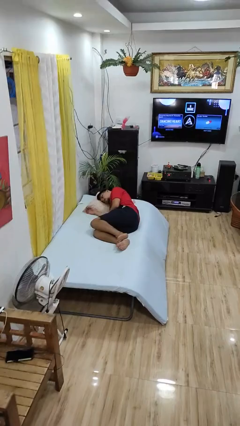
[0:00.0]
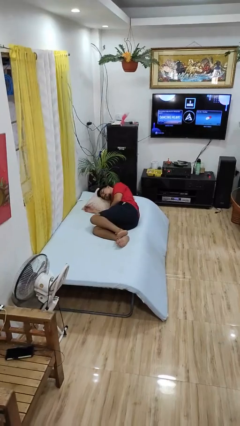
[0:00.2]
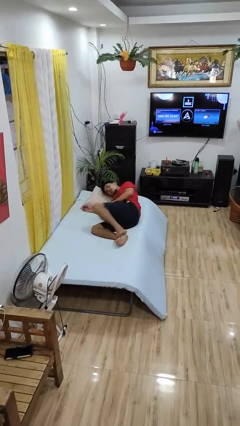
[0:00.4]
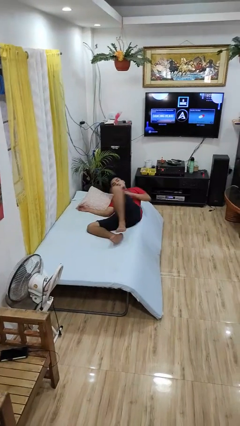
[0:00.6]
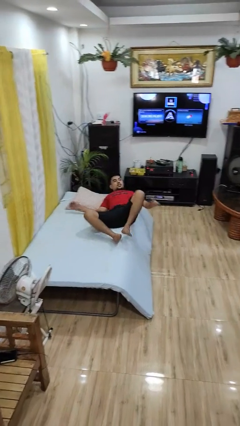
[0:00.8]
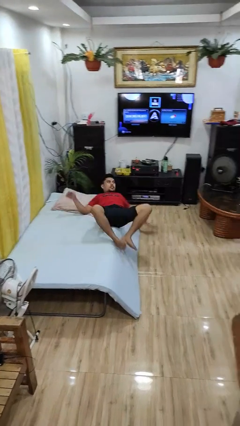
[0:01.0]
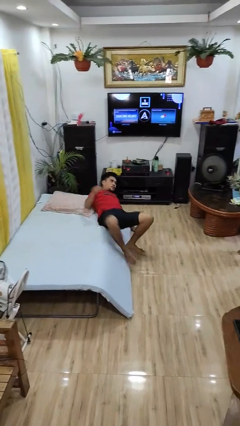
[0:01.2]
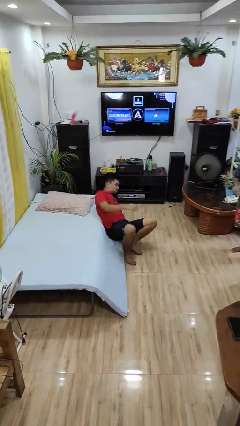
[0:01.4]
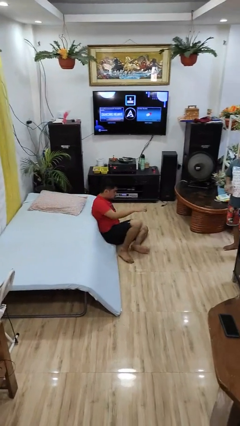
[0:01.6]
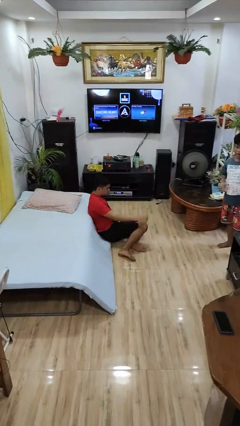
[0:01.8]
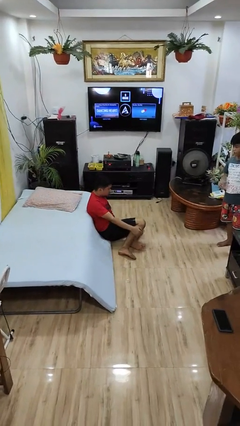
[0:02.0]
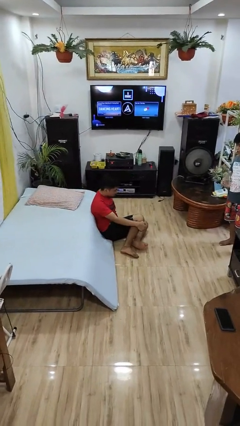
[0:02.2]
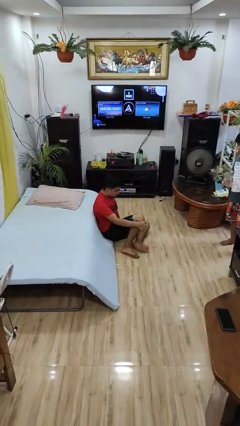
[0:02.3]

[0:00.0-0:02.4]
person falls from bed

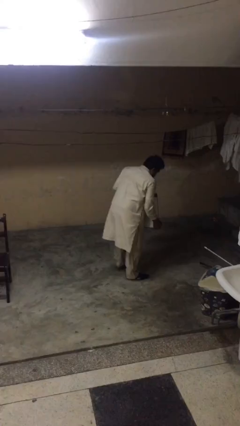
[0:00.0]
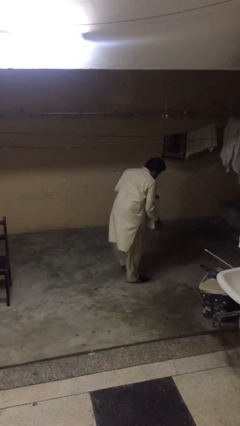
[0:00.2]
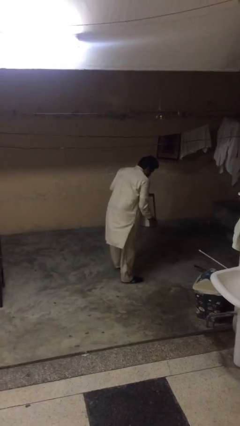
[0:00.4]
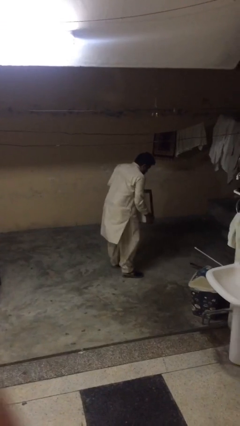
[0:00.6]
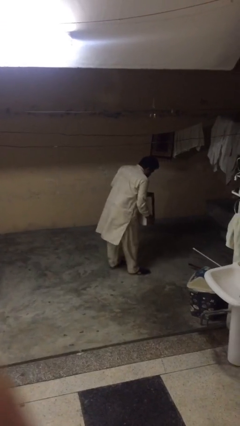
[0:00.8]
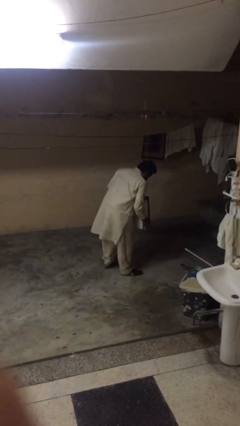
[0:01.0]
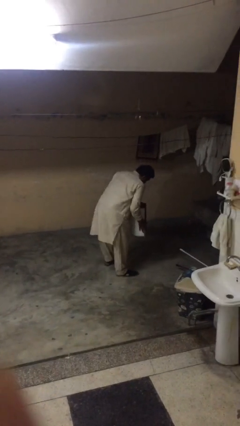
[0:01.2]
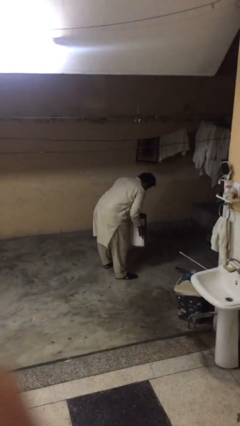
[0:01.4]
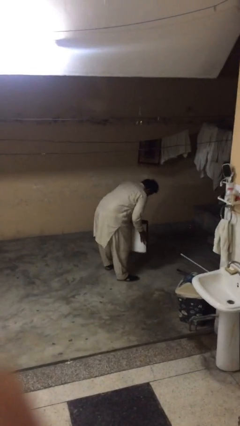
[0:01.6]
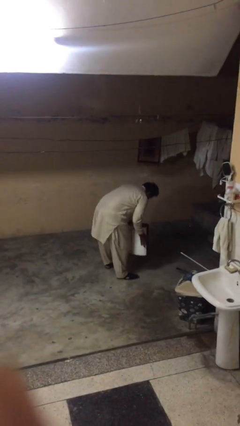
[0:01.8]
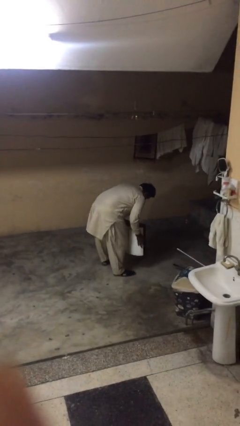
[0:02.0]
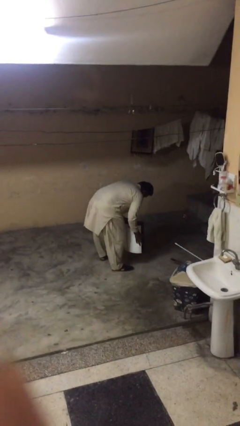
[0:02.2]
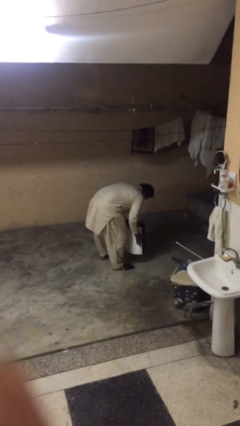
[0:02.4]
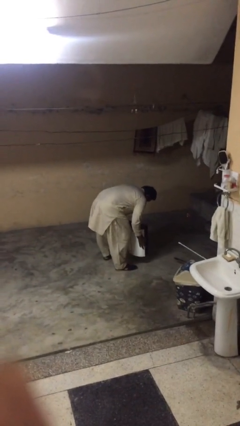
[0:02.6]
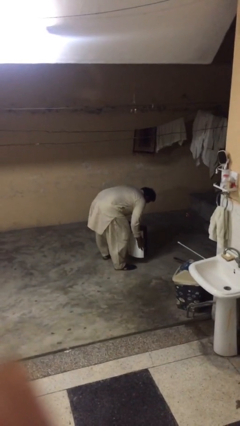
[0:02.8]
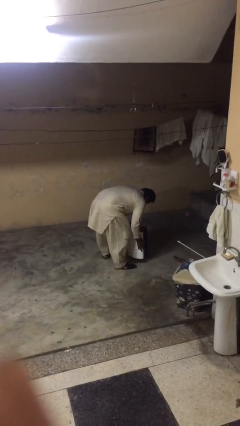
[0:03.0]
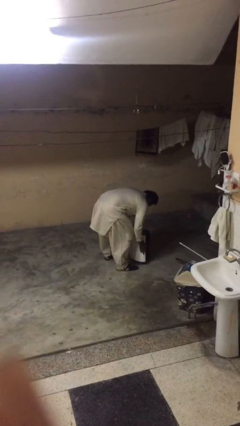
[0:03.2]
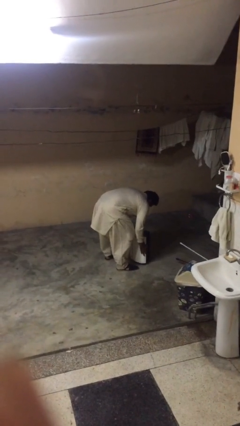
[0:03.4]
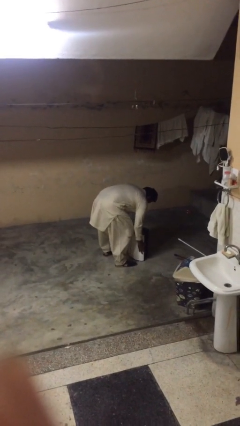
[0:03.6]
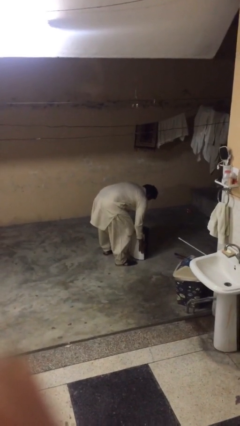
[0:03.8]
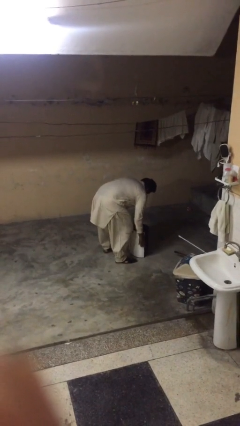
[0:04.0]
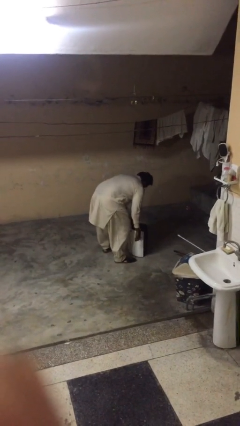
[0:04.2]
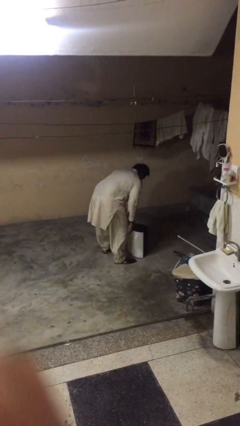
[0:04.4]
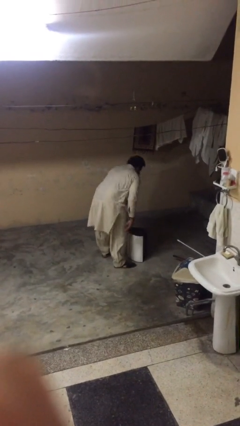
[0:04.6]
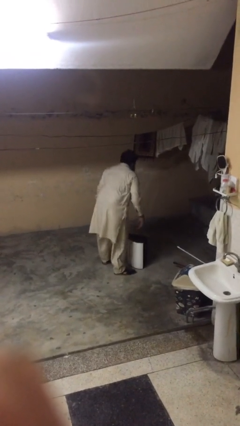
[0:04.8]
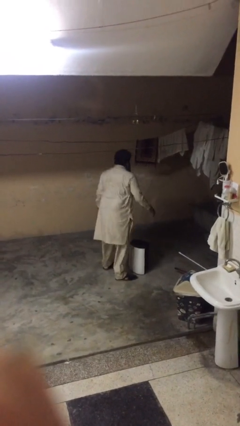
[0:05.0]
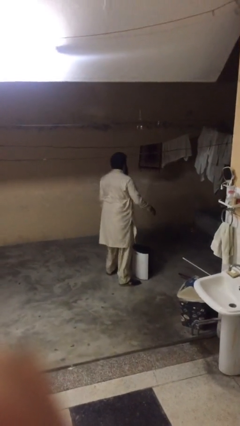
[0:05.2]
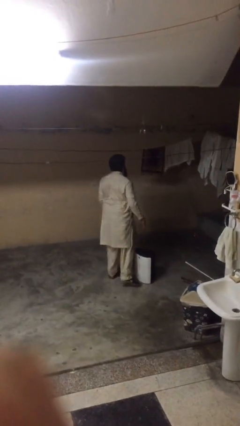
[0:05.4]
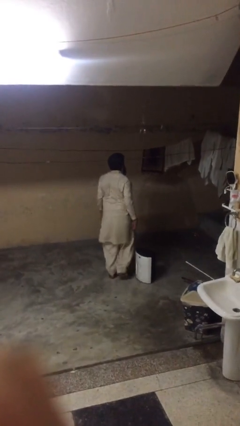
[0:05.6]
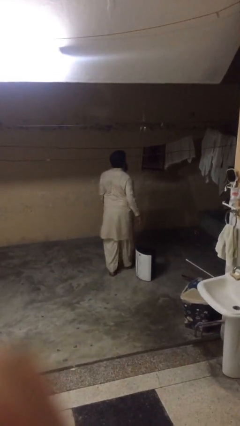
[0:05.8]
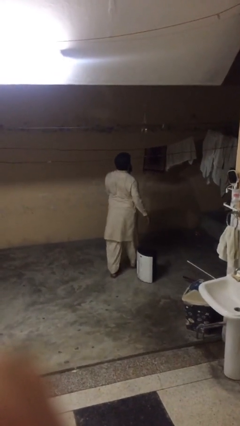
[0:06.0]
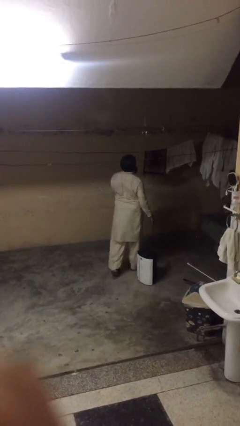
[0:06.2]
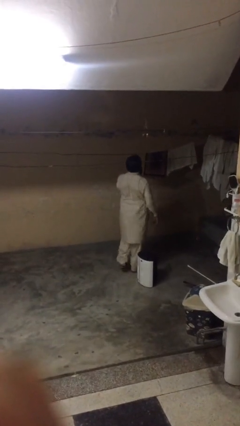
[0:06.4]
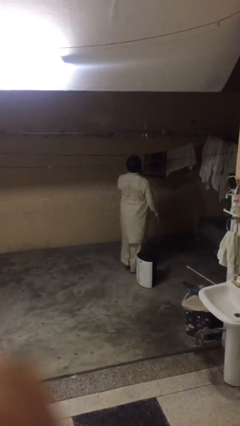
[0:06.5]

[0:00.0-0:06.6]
person puts down object on floor

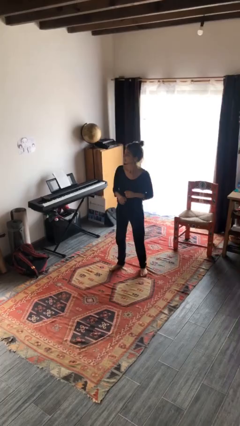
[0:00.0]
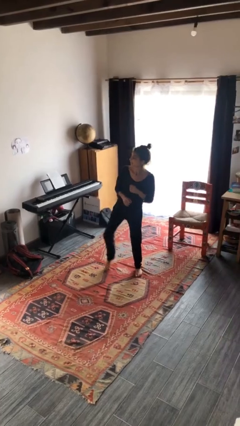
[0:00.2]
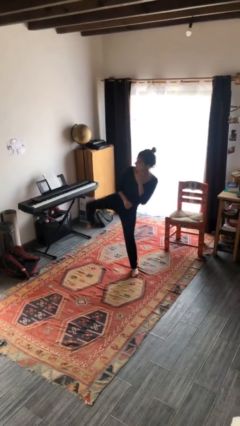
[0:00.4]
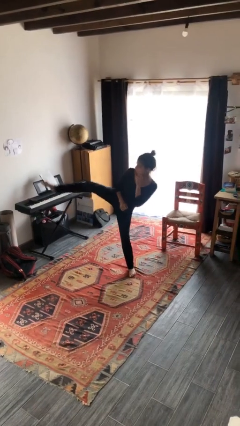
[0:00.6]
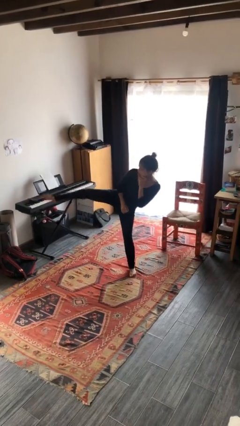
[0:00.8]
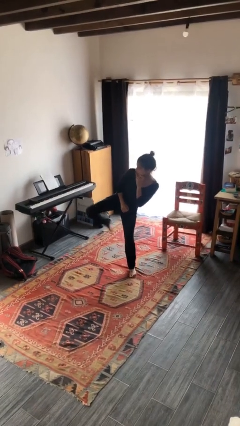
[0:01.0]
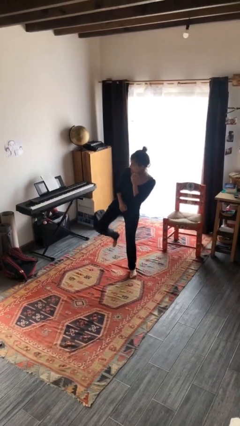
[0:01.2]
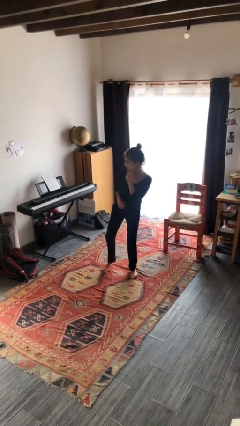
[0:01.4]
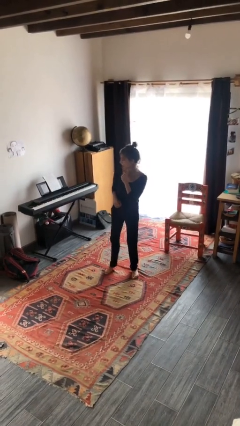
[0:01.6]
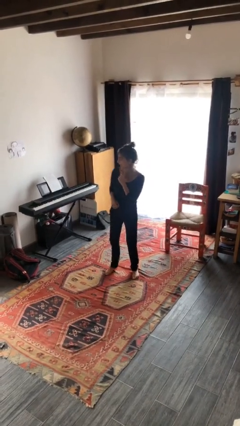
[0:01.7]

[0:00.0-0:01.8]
person karate kicks

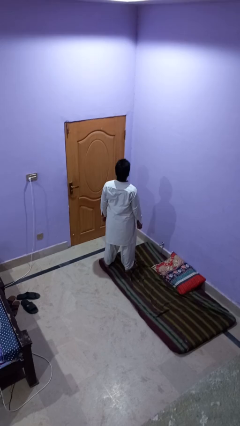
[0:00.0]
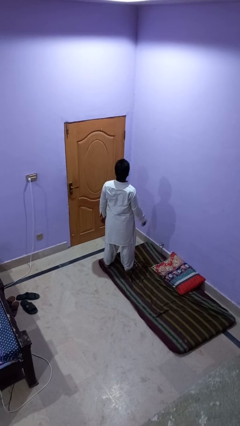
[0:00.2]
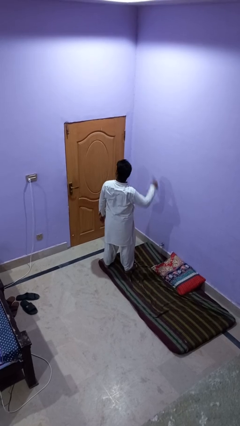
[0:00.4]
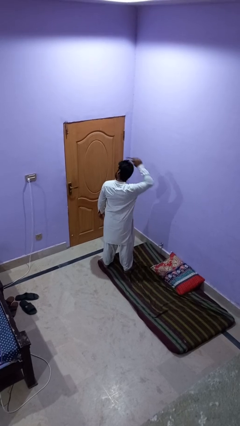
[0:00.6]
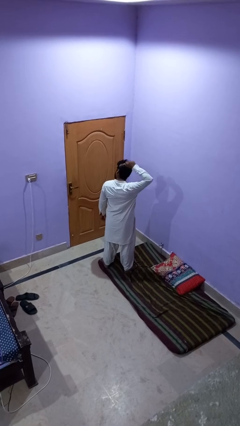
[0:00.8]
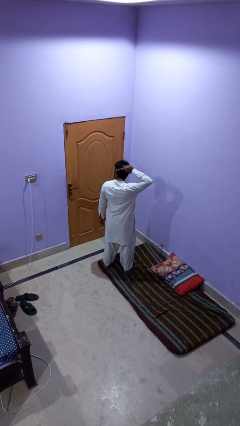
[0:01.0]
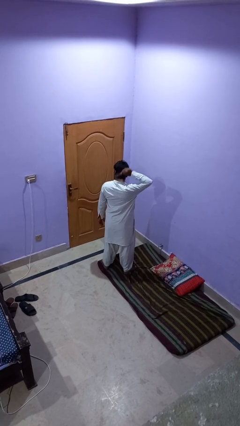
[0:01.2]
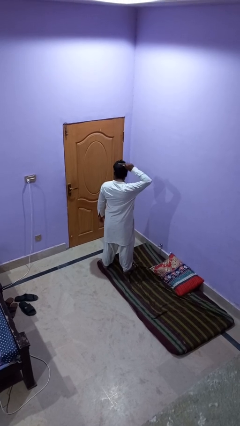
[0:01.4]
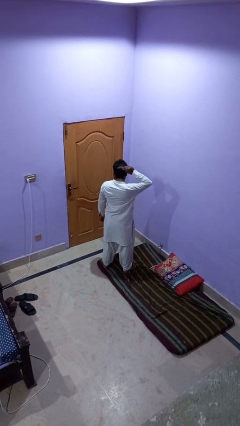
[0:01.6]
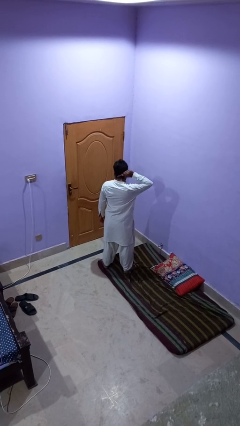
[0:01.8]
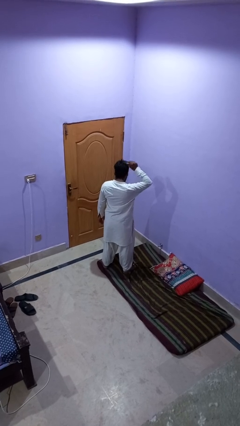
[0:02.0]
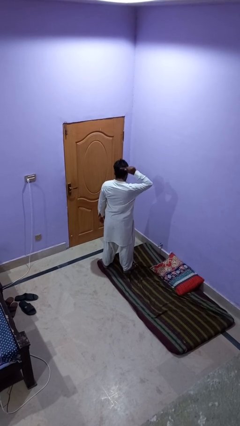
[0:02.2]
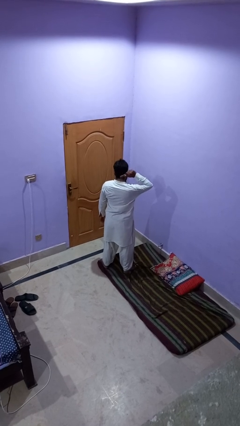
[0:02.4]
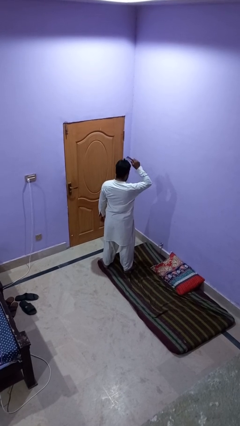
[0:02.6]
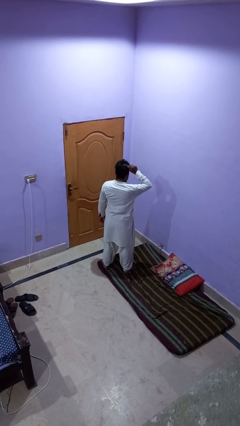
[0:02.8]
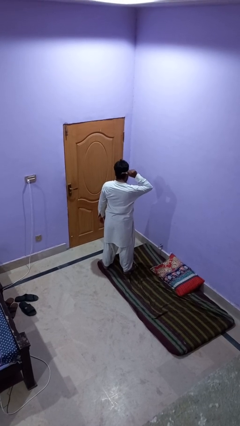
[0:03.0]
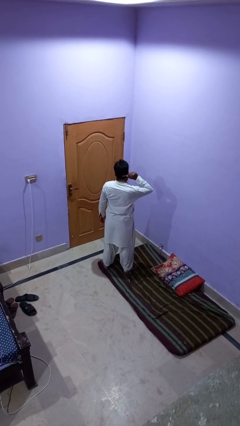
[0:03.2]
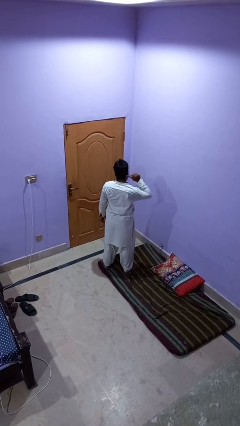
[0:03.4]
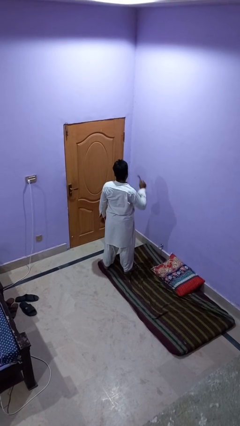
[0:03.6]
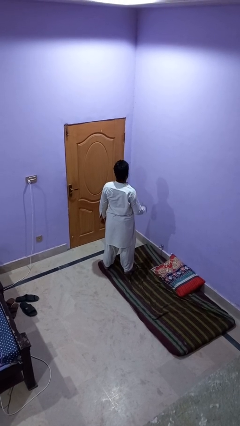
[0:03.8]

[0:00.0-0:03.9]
person brushes hair

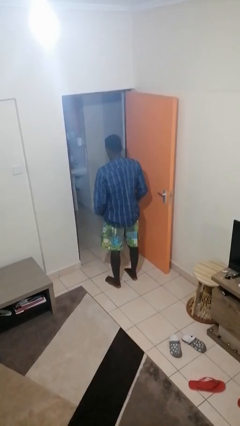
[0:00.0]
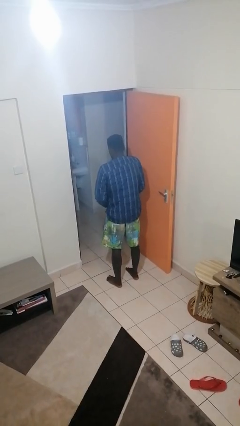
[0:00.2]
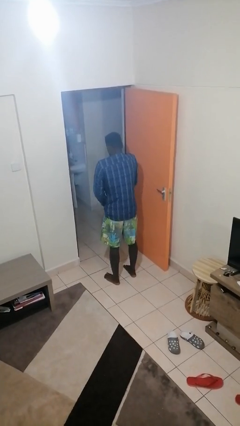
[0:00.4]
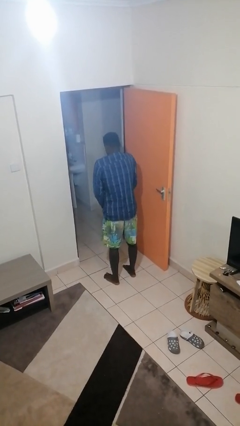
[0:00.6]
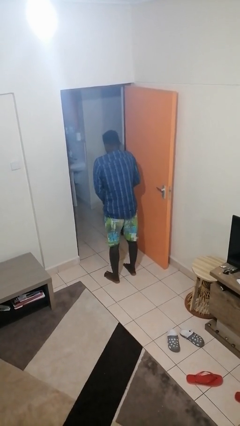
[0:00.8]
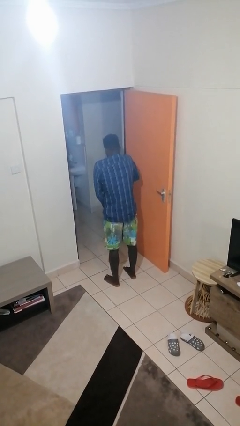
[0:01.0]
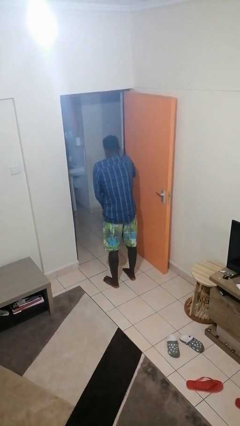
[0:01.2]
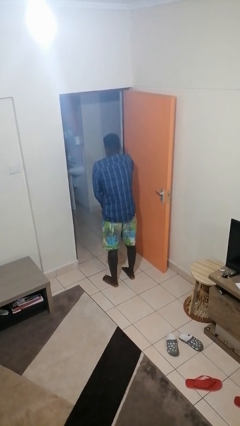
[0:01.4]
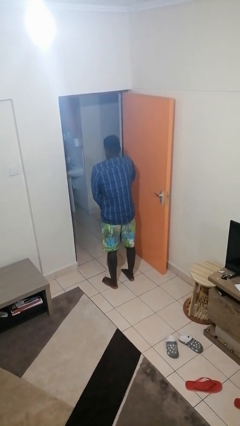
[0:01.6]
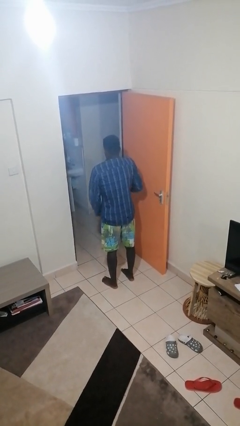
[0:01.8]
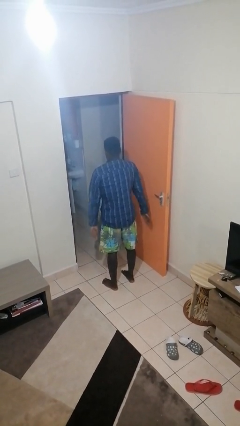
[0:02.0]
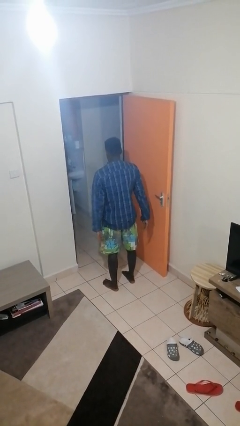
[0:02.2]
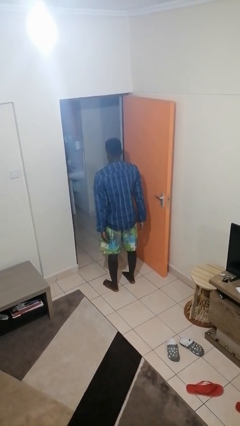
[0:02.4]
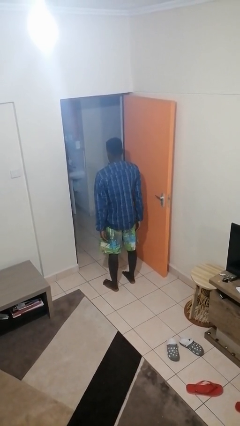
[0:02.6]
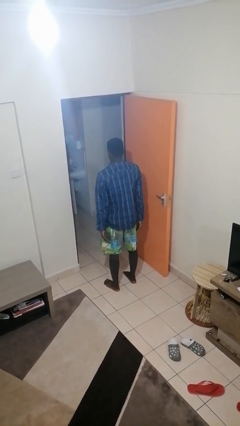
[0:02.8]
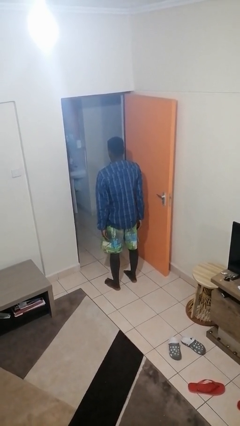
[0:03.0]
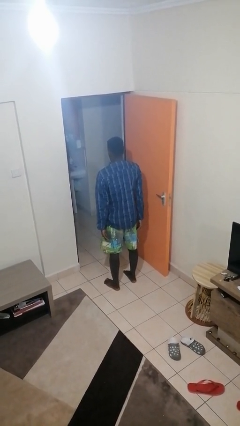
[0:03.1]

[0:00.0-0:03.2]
person zips up jacket
